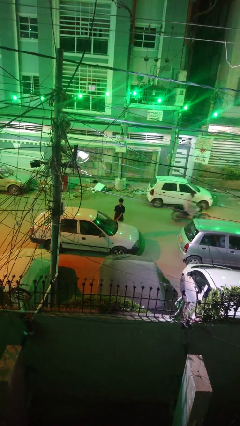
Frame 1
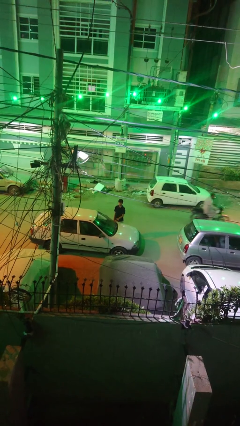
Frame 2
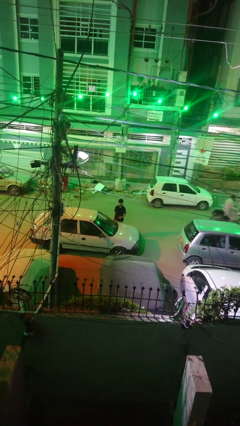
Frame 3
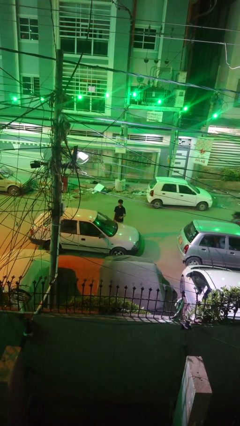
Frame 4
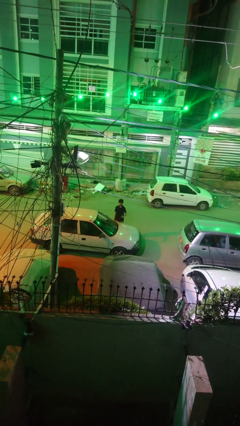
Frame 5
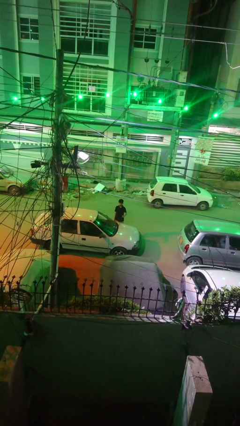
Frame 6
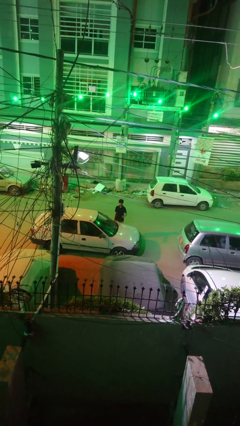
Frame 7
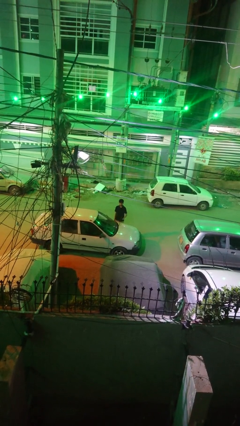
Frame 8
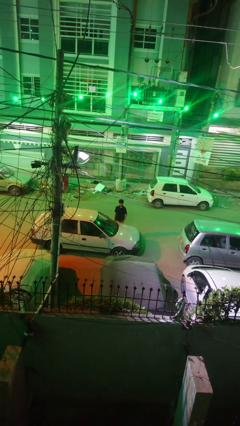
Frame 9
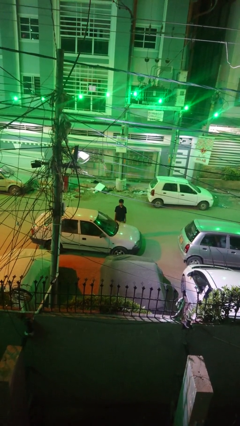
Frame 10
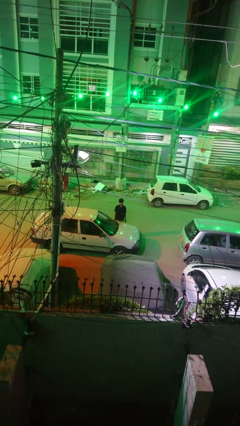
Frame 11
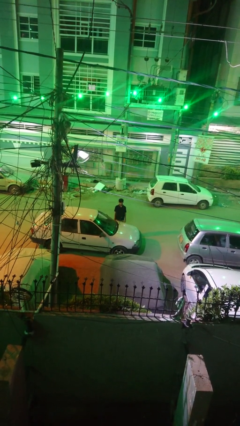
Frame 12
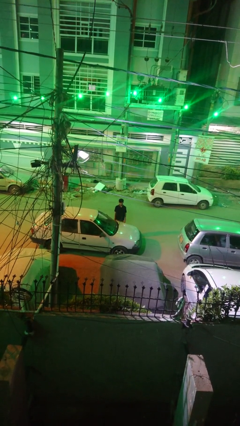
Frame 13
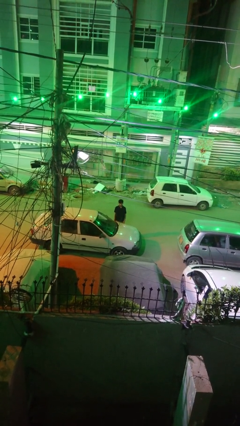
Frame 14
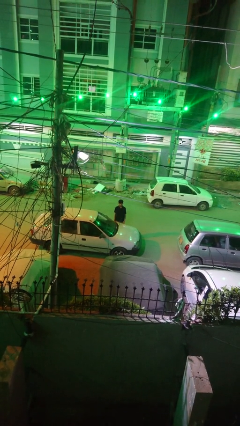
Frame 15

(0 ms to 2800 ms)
person flips up car wipers

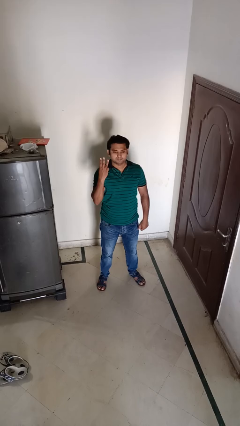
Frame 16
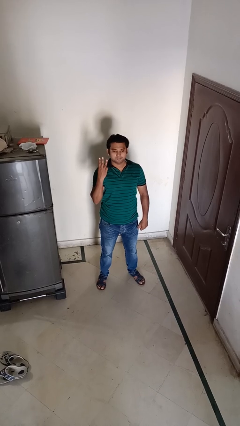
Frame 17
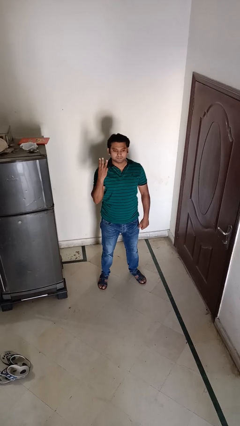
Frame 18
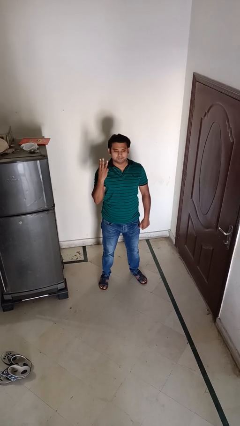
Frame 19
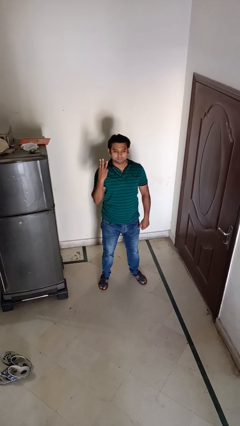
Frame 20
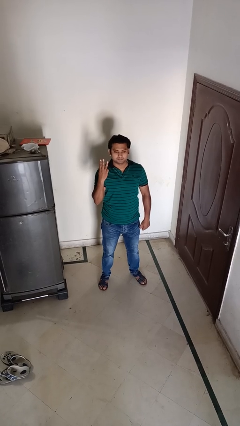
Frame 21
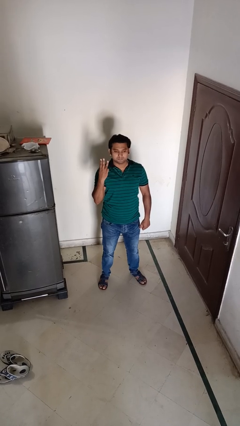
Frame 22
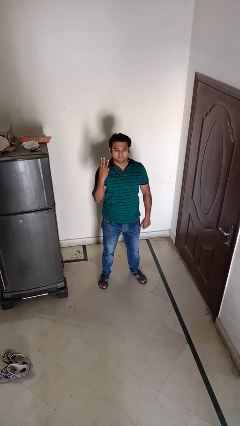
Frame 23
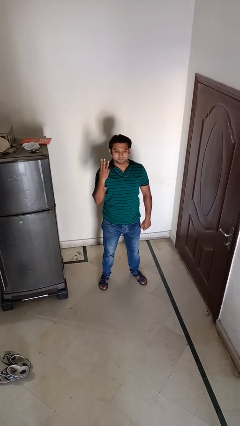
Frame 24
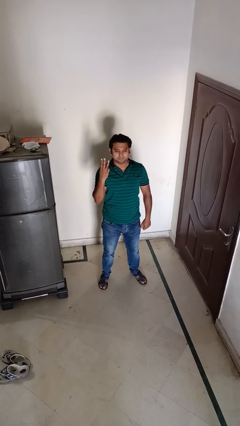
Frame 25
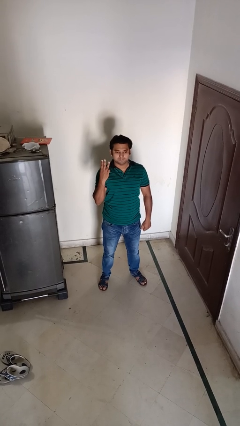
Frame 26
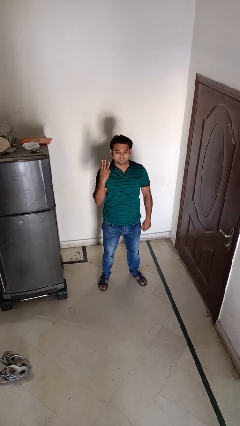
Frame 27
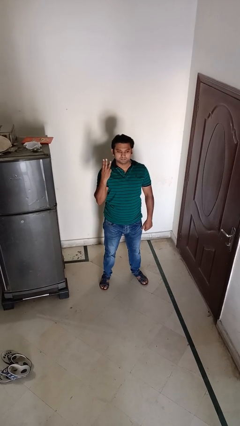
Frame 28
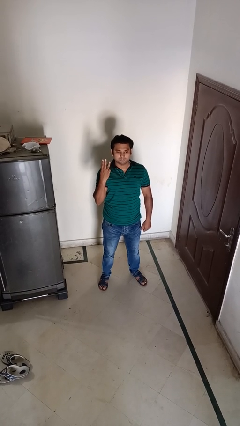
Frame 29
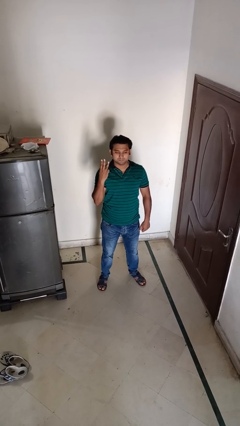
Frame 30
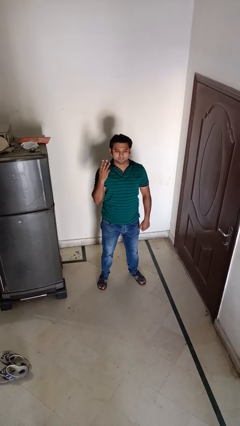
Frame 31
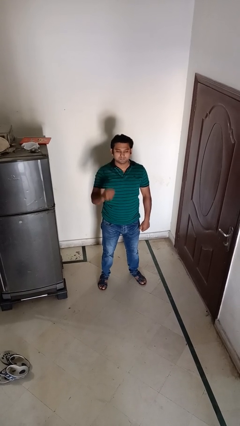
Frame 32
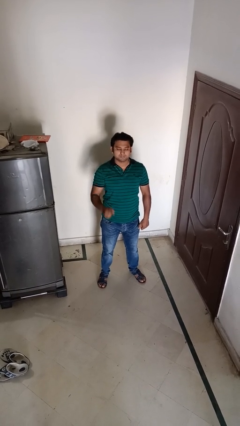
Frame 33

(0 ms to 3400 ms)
person gestures number three

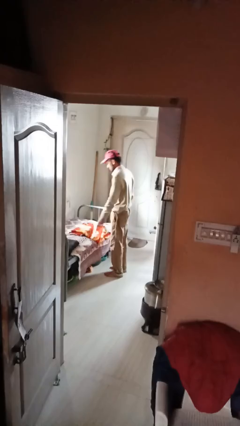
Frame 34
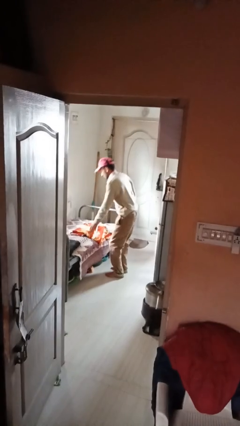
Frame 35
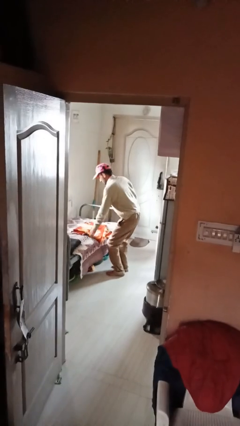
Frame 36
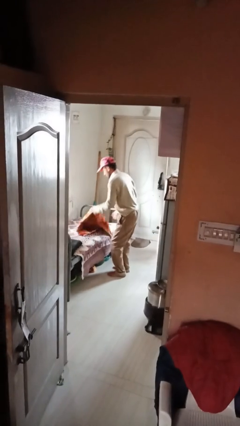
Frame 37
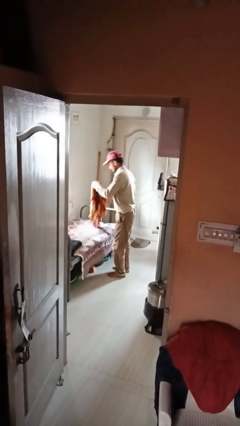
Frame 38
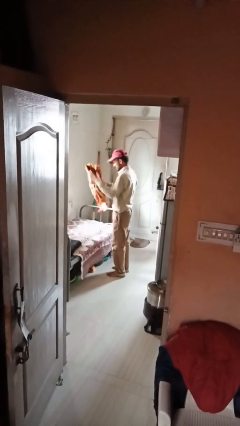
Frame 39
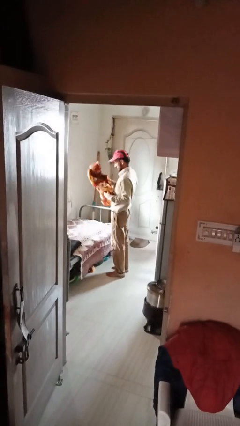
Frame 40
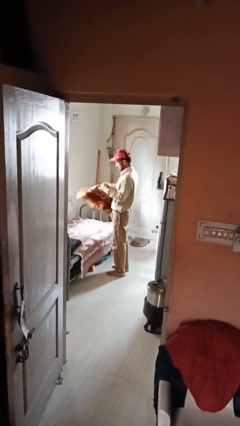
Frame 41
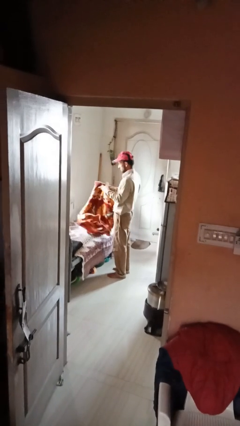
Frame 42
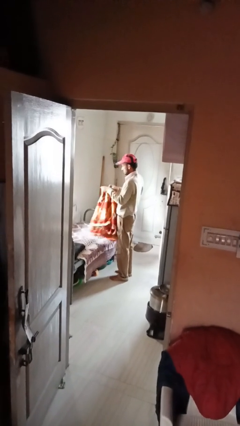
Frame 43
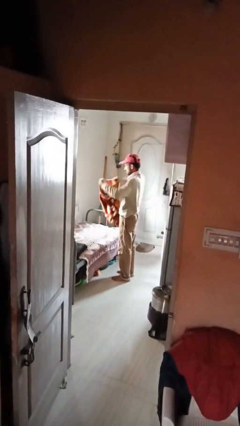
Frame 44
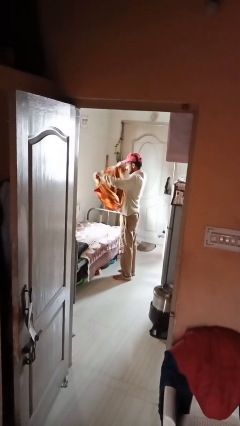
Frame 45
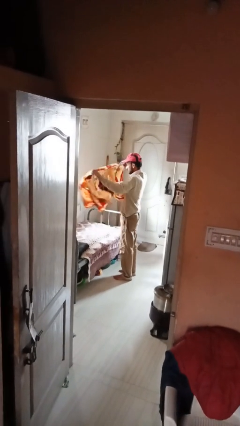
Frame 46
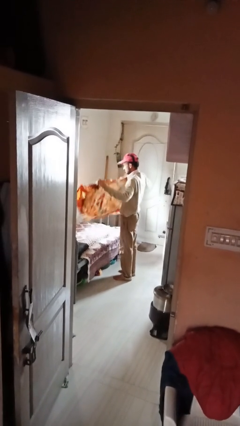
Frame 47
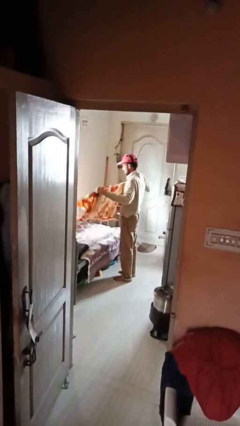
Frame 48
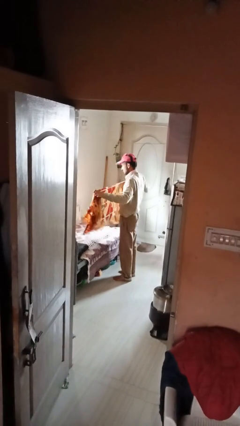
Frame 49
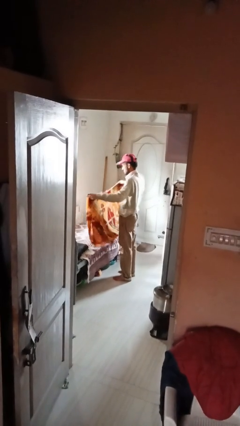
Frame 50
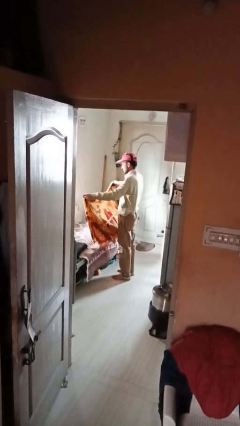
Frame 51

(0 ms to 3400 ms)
person unfolds blanket

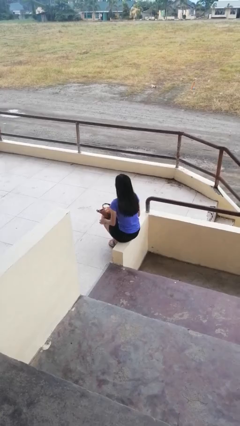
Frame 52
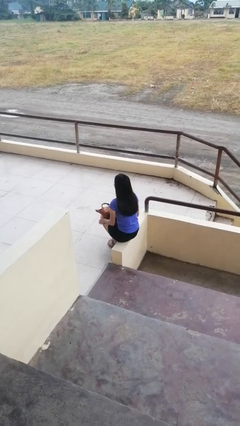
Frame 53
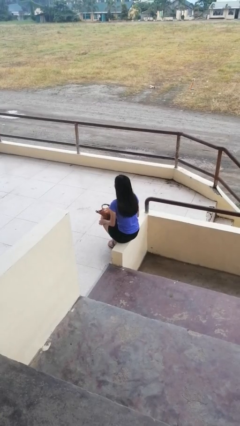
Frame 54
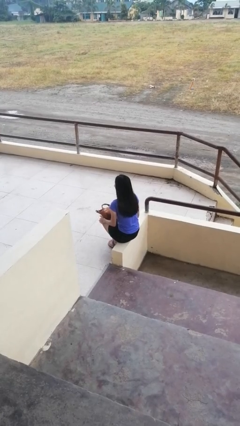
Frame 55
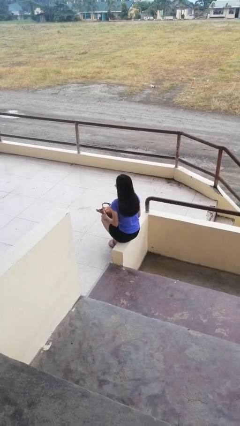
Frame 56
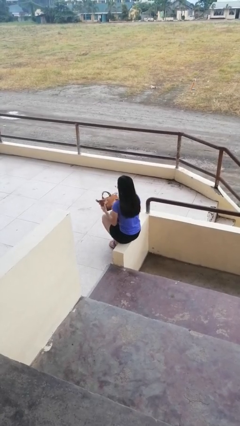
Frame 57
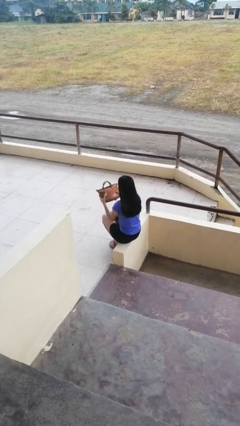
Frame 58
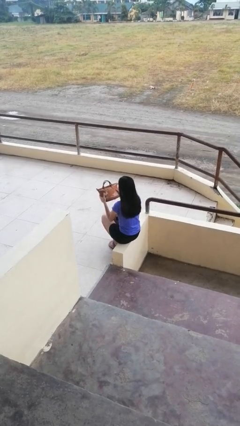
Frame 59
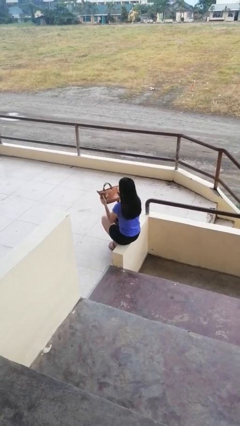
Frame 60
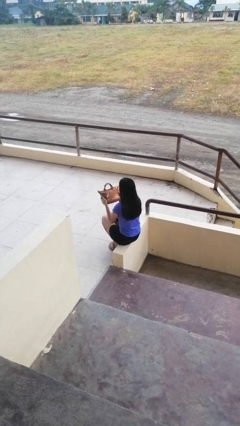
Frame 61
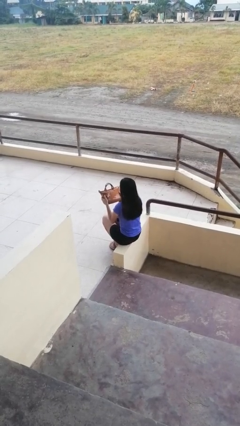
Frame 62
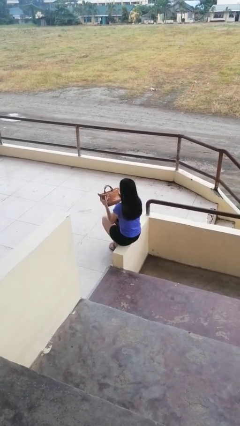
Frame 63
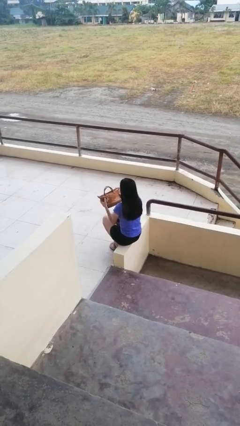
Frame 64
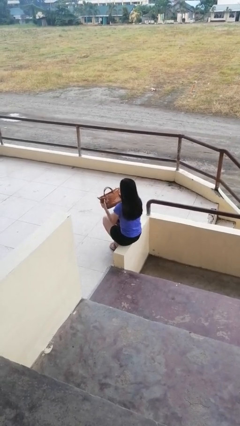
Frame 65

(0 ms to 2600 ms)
person taps object with finger

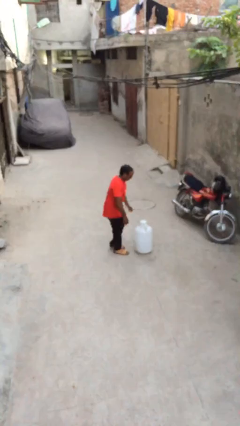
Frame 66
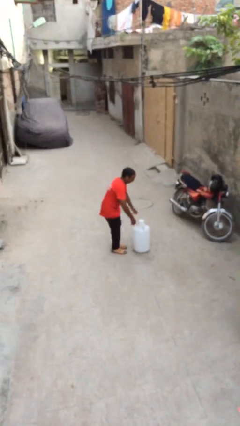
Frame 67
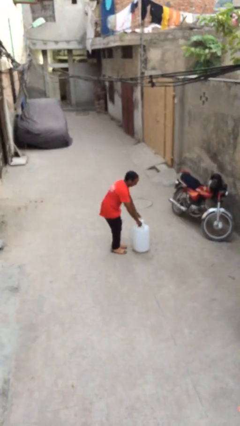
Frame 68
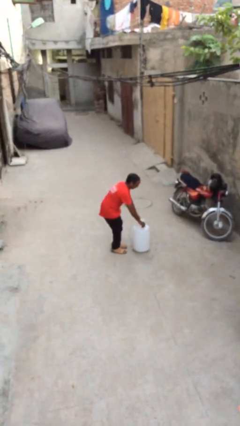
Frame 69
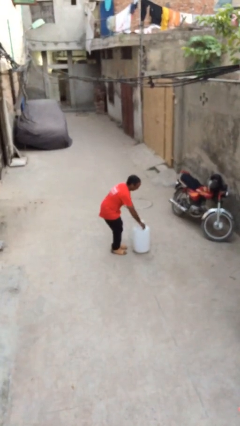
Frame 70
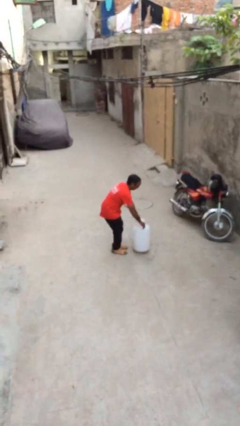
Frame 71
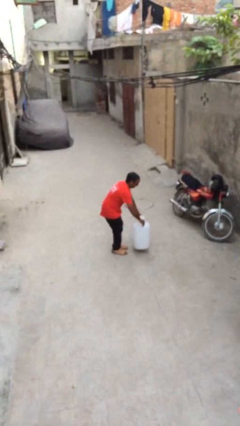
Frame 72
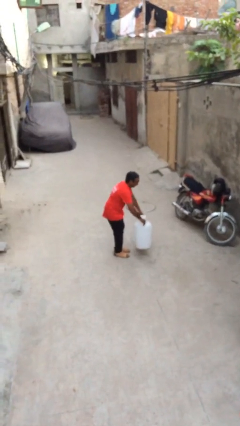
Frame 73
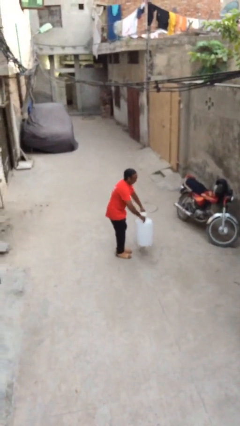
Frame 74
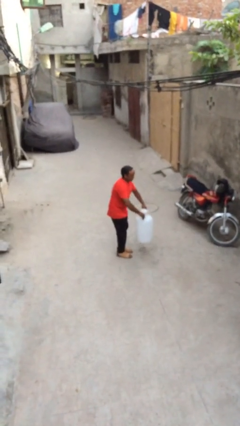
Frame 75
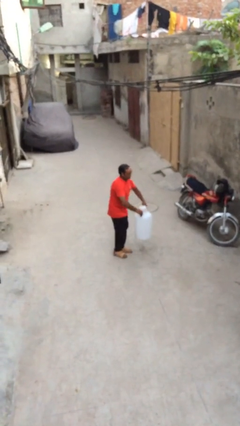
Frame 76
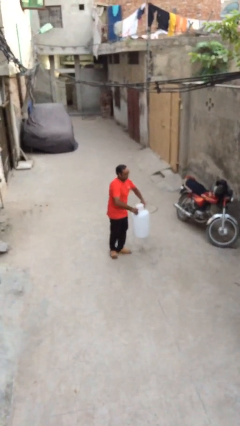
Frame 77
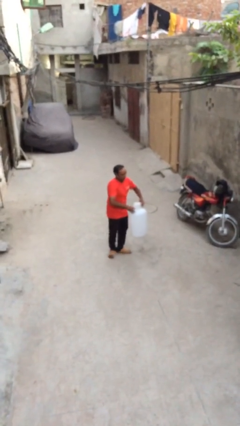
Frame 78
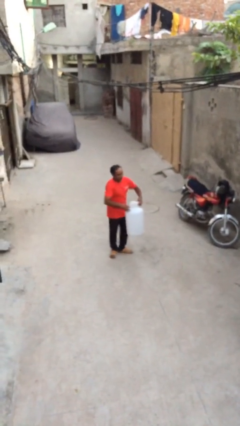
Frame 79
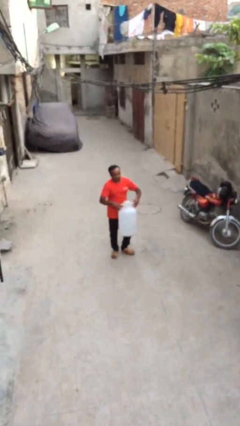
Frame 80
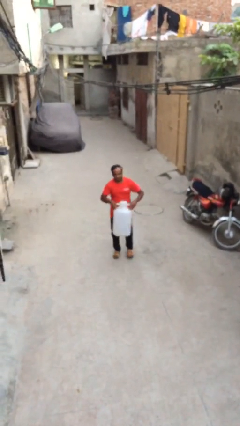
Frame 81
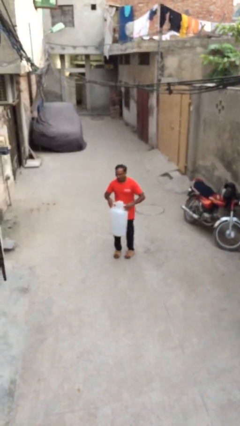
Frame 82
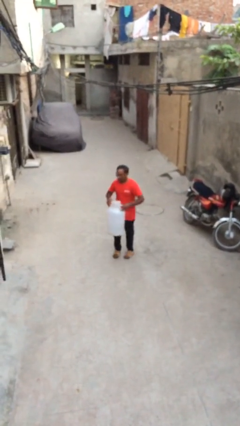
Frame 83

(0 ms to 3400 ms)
person picks up object from floor

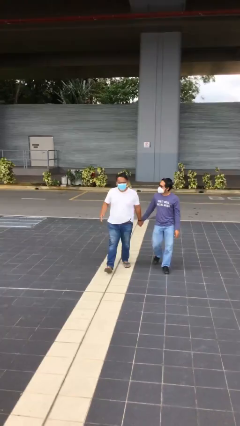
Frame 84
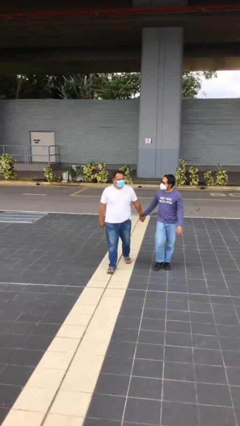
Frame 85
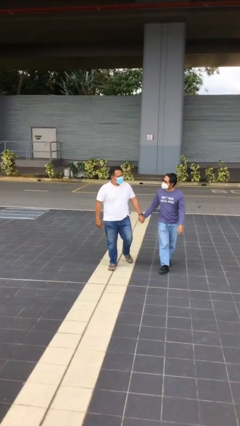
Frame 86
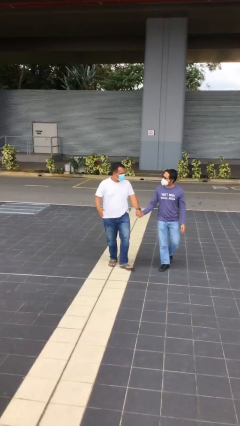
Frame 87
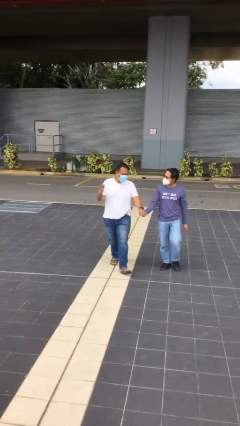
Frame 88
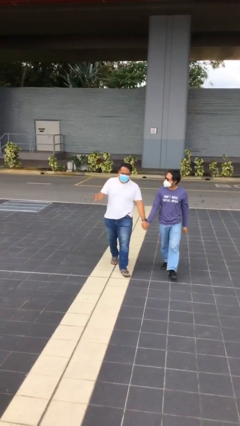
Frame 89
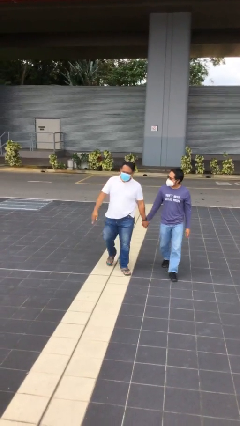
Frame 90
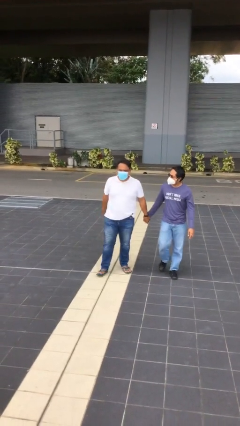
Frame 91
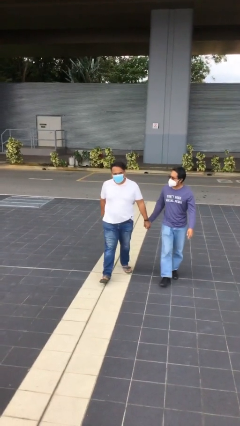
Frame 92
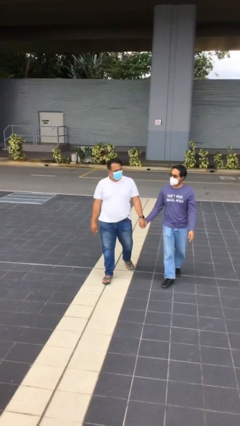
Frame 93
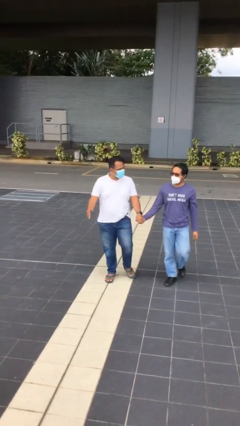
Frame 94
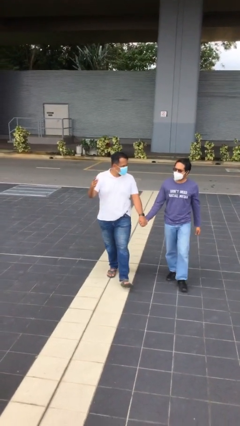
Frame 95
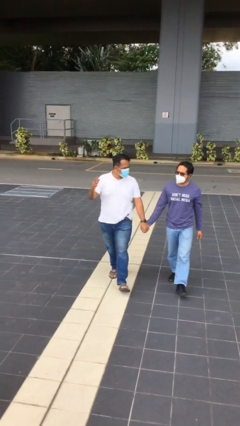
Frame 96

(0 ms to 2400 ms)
person holds hand
